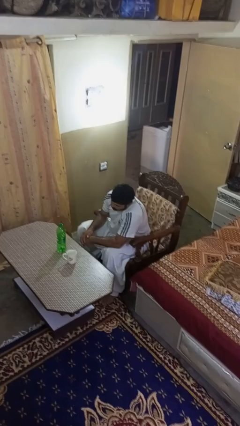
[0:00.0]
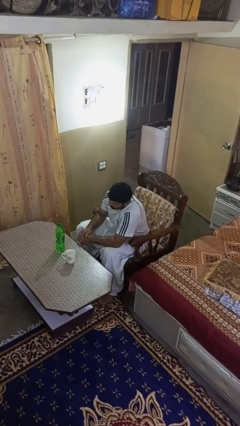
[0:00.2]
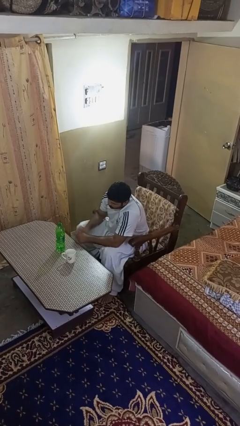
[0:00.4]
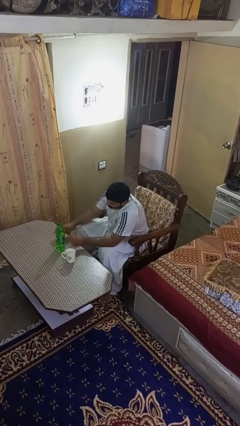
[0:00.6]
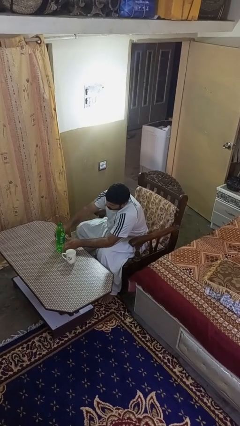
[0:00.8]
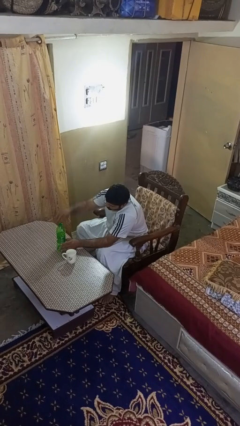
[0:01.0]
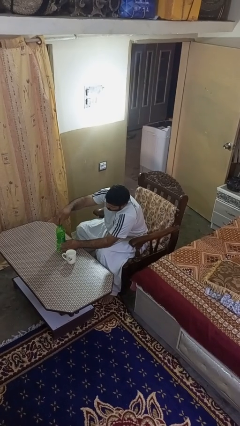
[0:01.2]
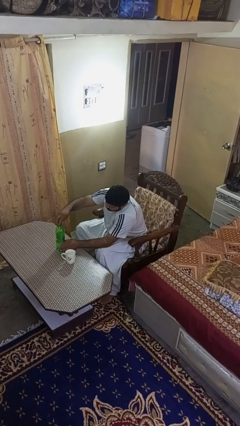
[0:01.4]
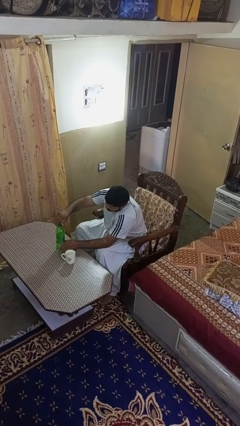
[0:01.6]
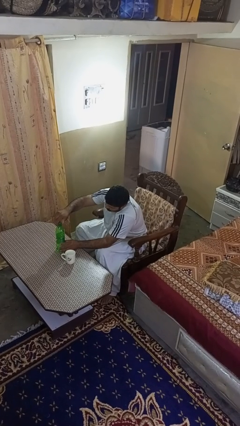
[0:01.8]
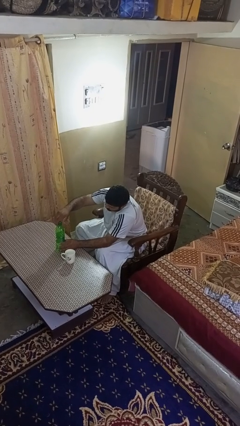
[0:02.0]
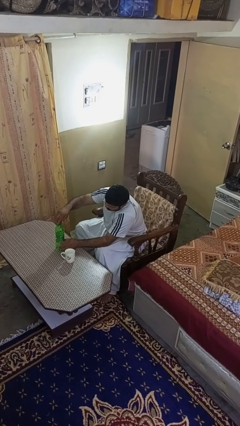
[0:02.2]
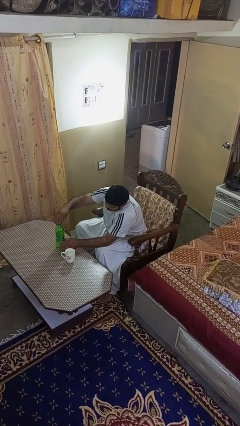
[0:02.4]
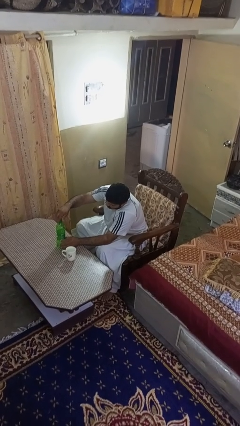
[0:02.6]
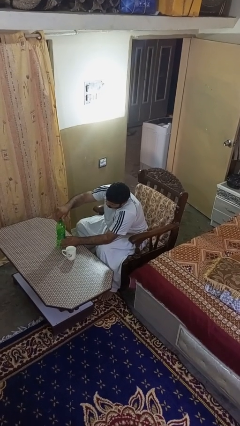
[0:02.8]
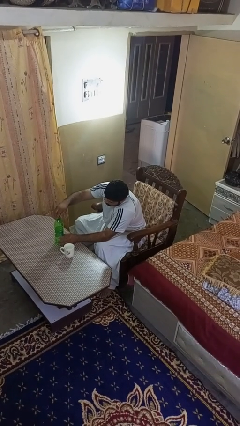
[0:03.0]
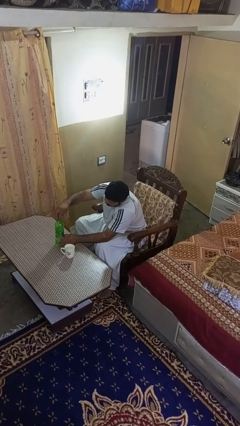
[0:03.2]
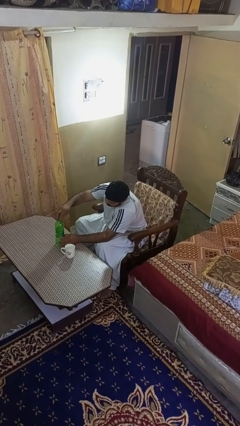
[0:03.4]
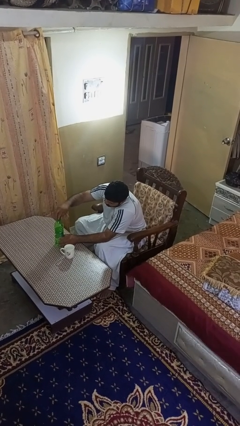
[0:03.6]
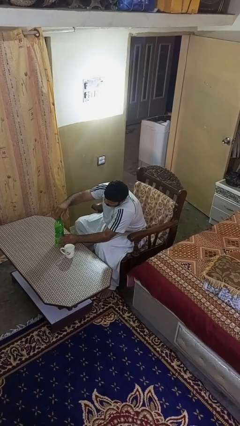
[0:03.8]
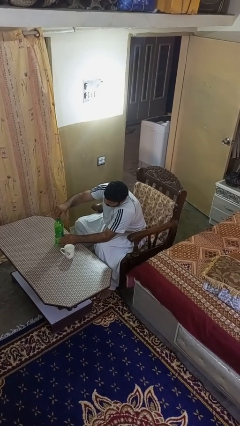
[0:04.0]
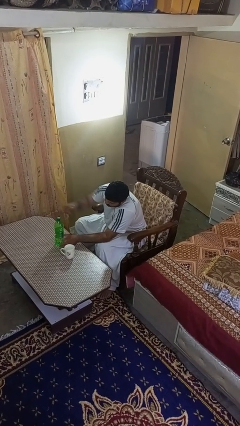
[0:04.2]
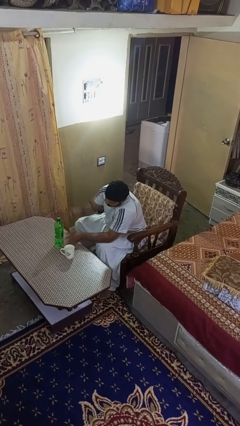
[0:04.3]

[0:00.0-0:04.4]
person screws lid to bottle

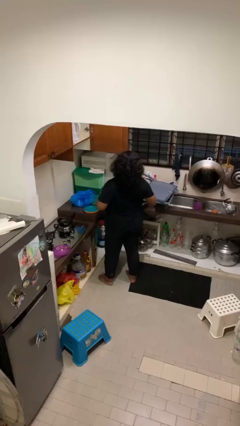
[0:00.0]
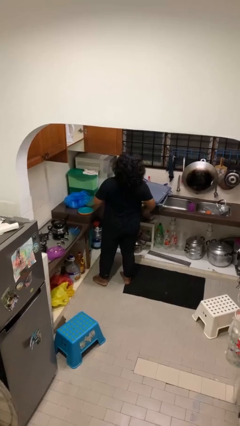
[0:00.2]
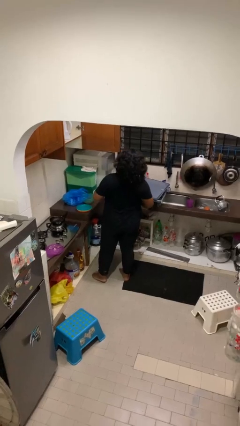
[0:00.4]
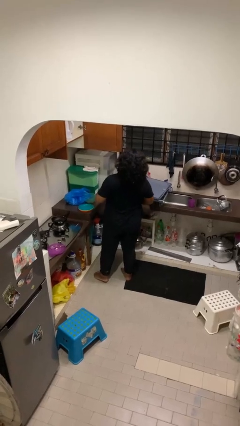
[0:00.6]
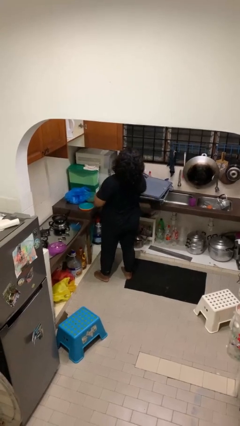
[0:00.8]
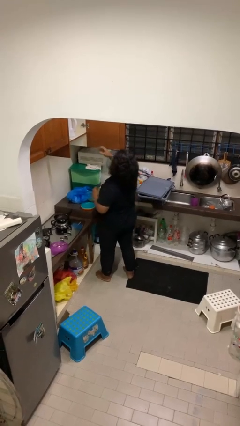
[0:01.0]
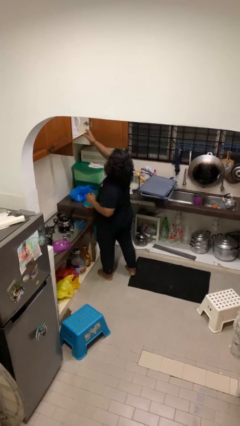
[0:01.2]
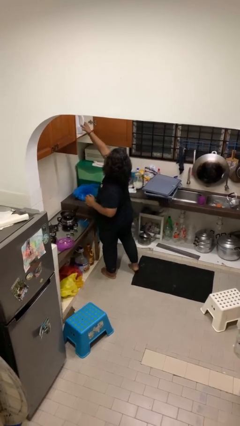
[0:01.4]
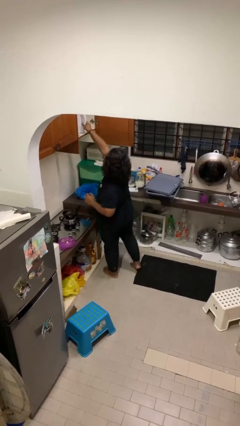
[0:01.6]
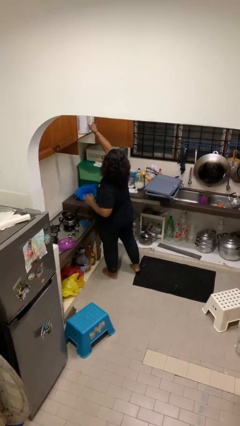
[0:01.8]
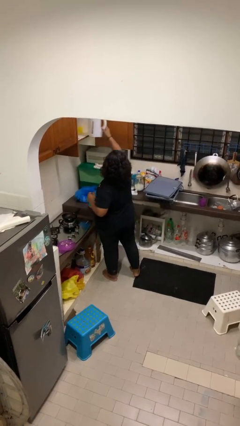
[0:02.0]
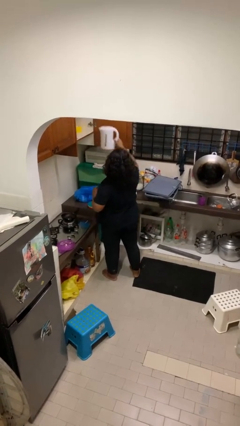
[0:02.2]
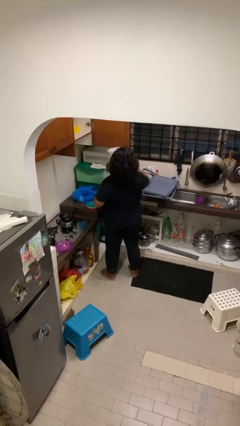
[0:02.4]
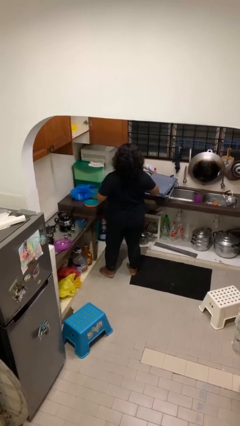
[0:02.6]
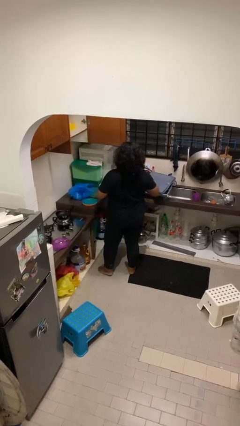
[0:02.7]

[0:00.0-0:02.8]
person takes object from cabinet

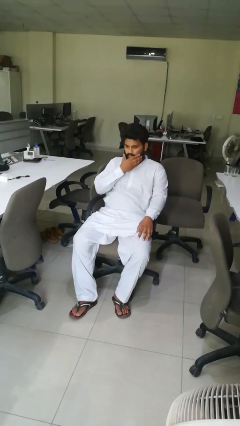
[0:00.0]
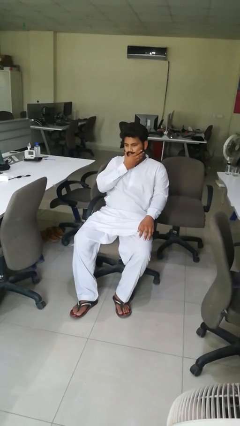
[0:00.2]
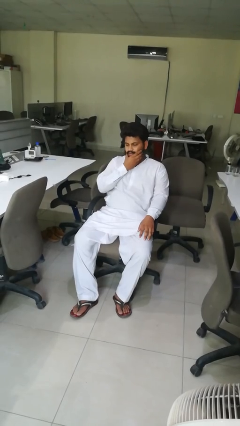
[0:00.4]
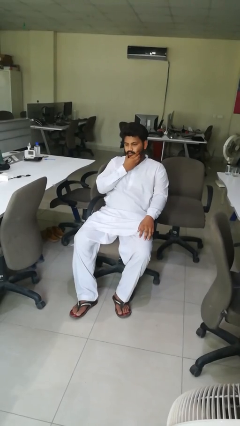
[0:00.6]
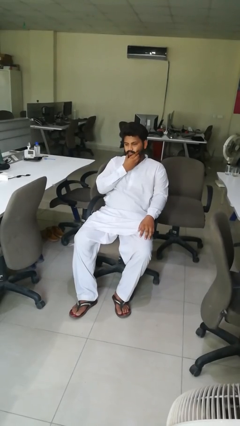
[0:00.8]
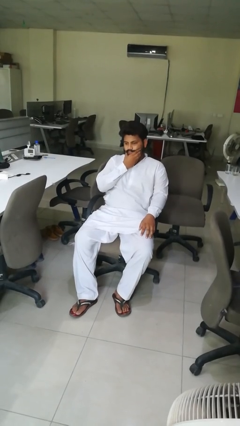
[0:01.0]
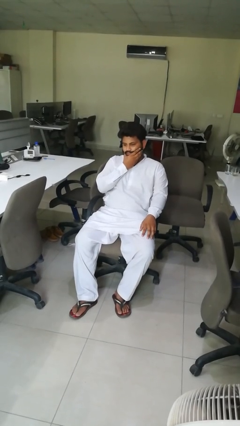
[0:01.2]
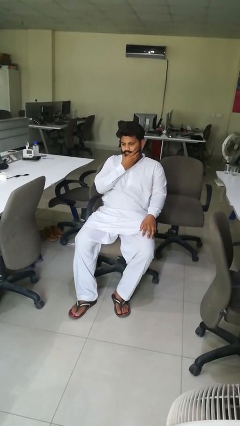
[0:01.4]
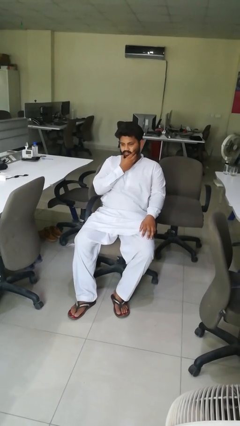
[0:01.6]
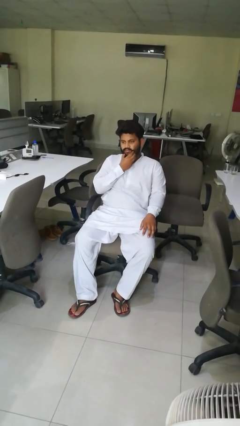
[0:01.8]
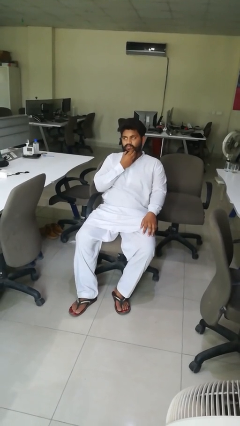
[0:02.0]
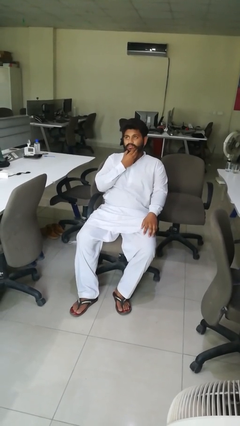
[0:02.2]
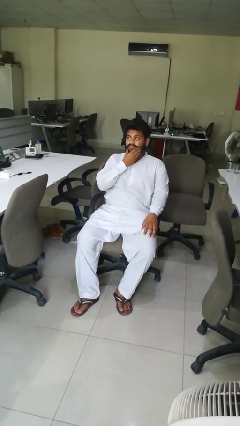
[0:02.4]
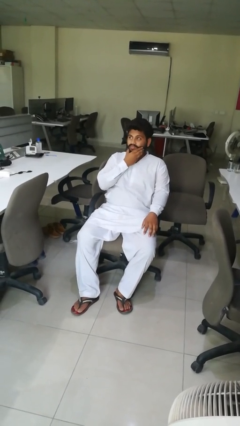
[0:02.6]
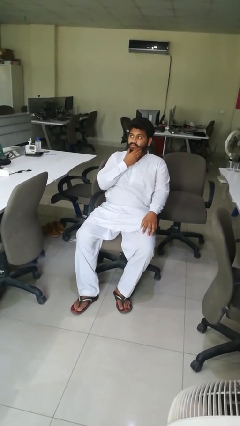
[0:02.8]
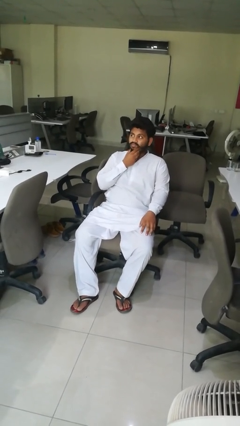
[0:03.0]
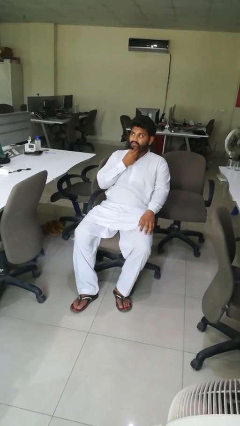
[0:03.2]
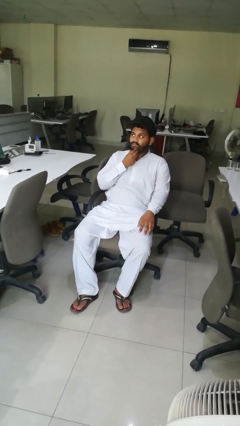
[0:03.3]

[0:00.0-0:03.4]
person strokes chin

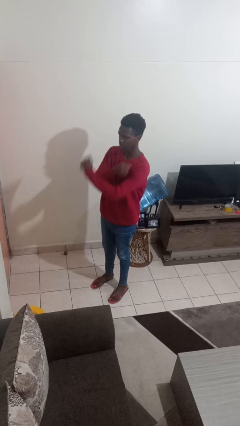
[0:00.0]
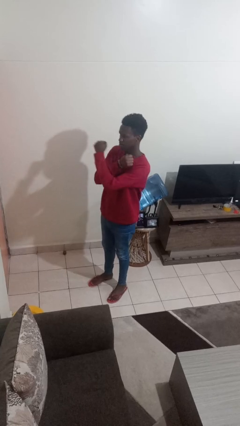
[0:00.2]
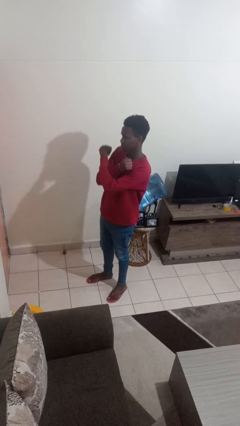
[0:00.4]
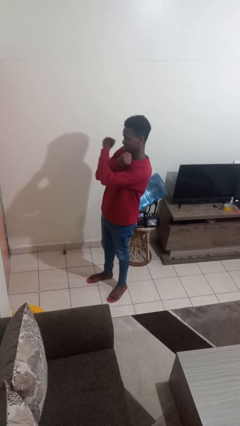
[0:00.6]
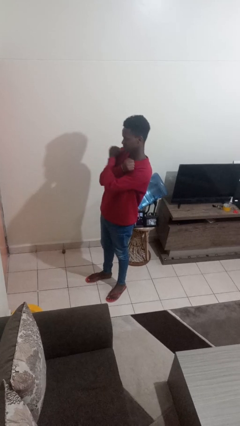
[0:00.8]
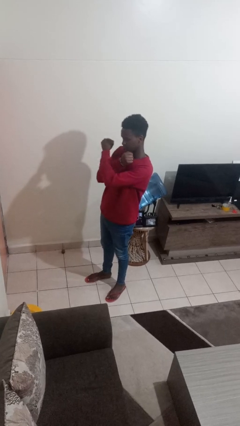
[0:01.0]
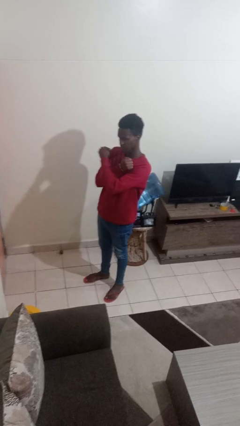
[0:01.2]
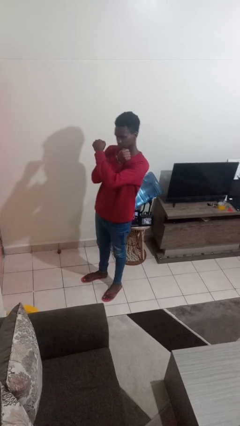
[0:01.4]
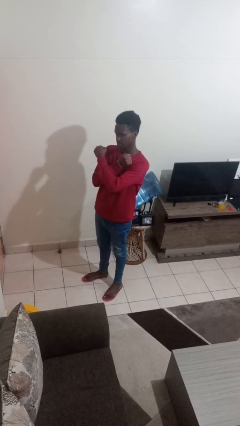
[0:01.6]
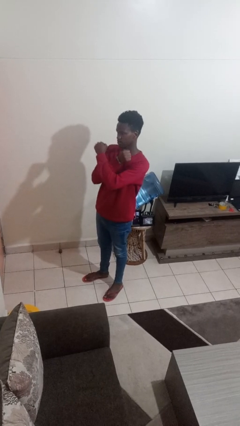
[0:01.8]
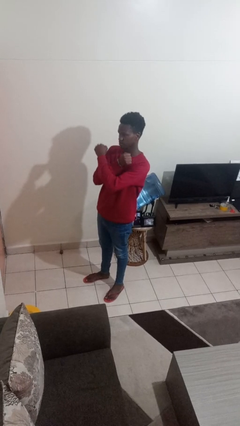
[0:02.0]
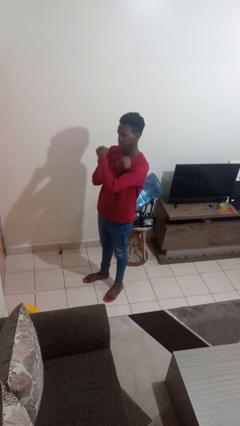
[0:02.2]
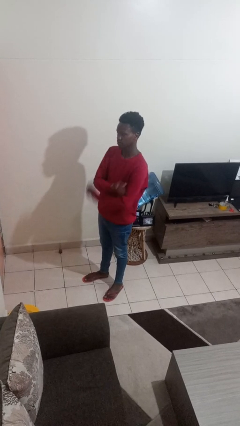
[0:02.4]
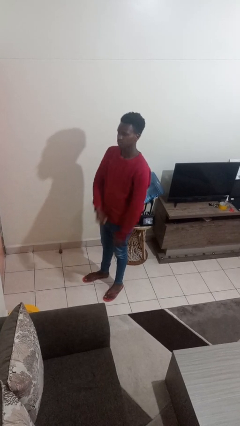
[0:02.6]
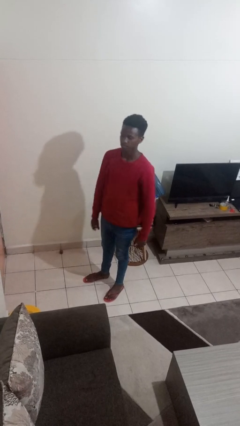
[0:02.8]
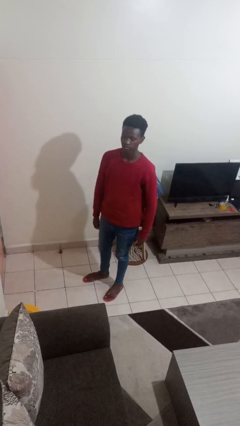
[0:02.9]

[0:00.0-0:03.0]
person gestures arms x

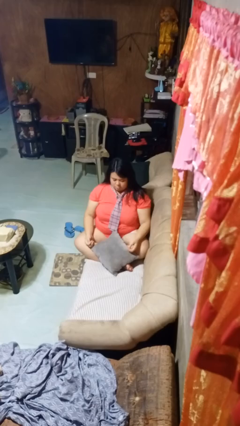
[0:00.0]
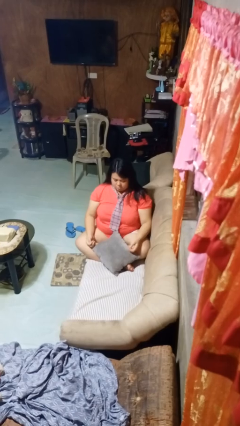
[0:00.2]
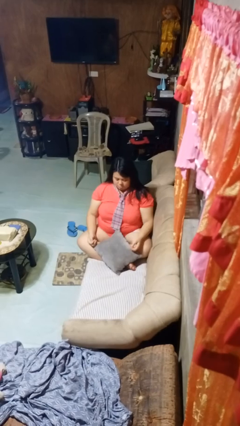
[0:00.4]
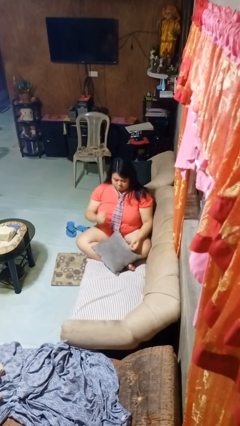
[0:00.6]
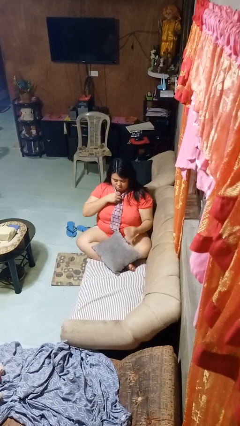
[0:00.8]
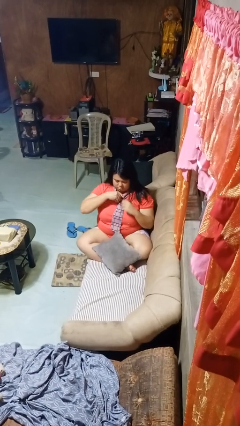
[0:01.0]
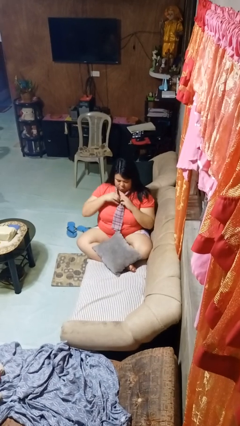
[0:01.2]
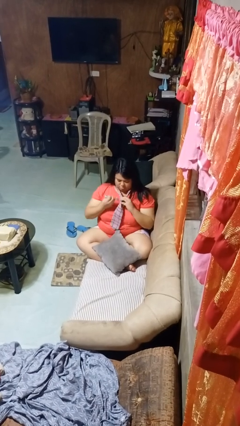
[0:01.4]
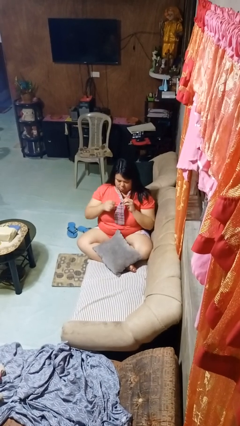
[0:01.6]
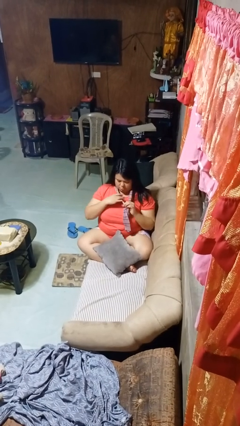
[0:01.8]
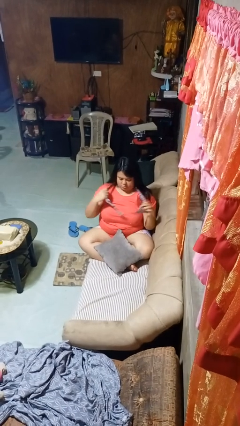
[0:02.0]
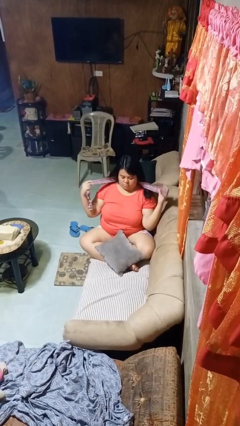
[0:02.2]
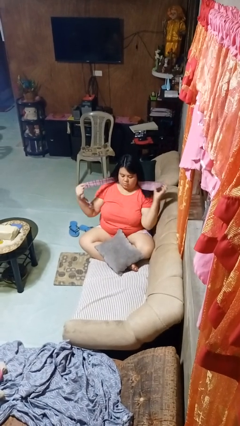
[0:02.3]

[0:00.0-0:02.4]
person takes off necktie

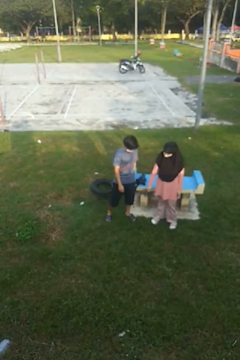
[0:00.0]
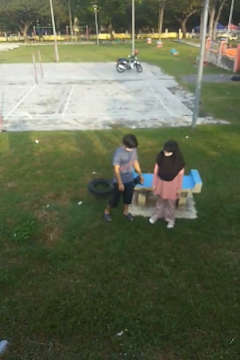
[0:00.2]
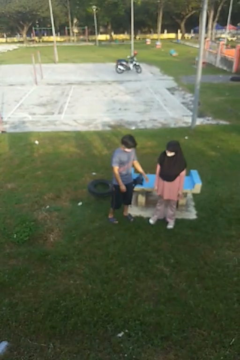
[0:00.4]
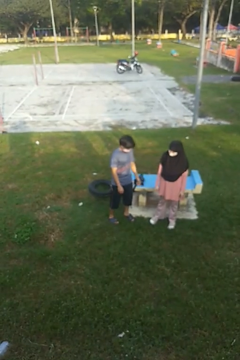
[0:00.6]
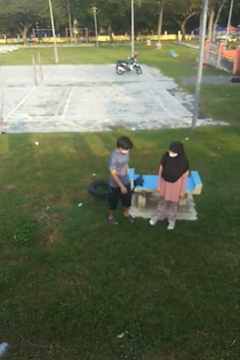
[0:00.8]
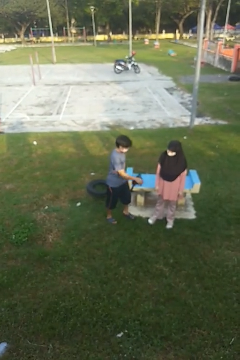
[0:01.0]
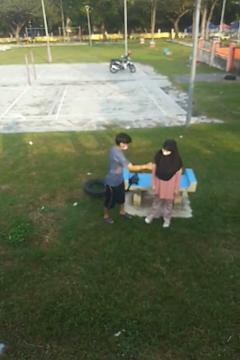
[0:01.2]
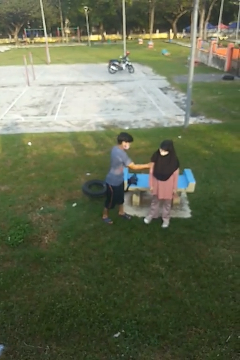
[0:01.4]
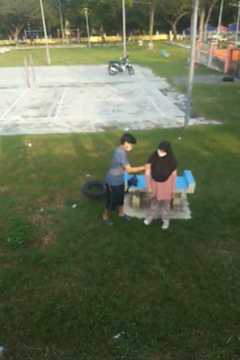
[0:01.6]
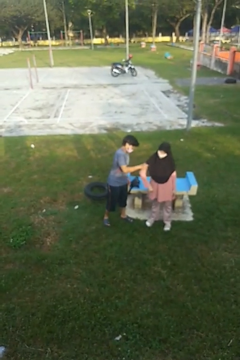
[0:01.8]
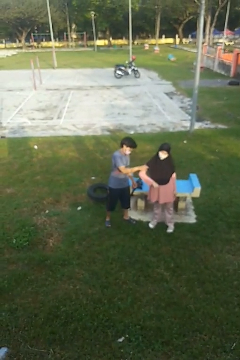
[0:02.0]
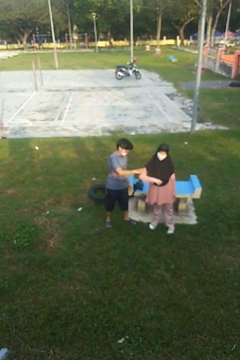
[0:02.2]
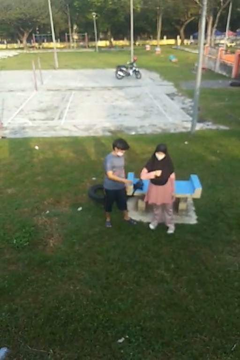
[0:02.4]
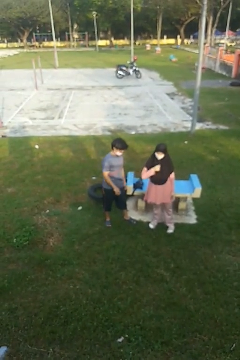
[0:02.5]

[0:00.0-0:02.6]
person grabs person by bicep
